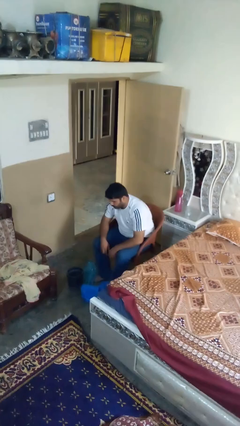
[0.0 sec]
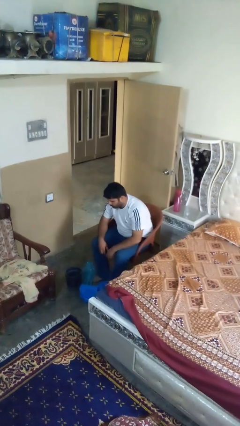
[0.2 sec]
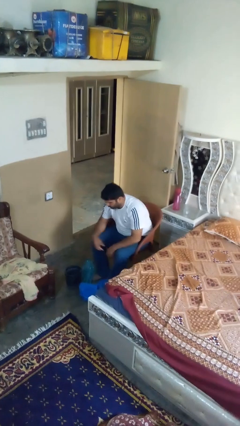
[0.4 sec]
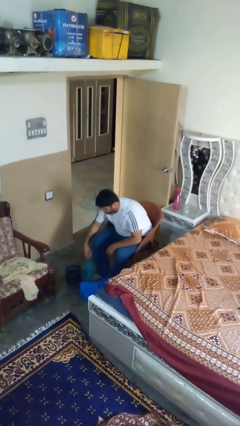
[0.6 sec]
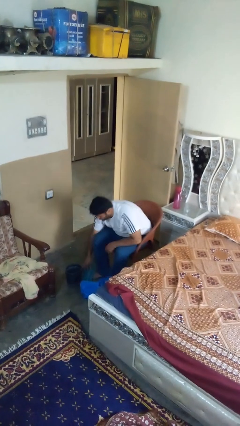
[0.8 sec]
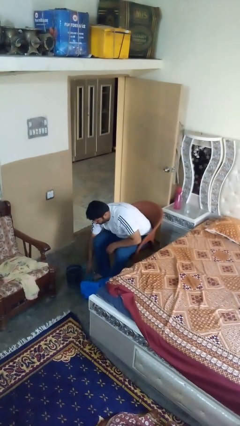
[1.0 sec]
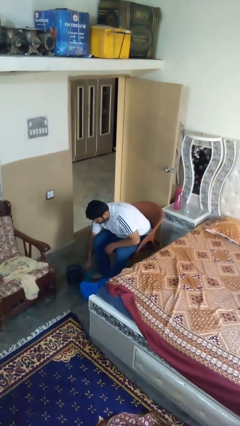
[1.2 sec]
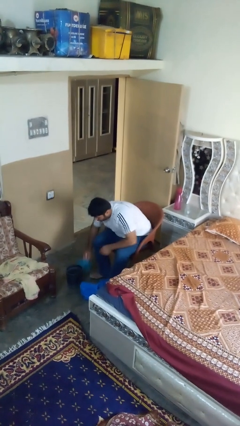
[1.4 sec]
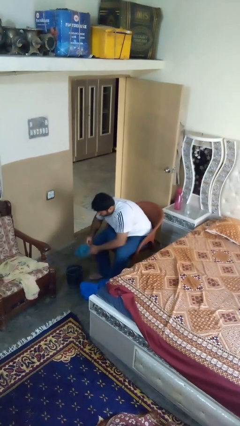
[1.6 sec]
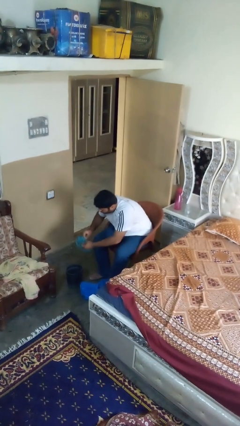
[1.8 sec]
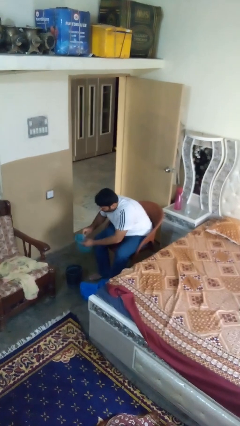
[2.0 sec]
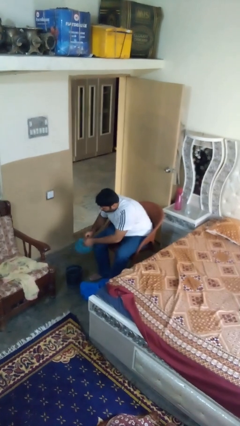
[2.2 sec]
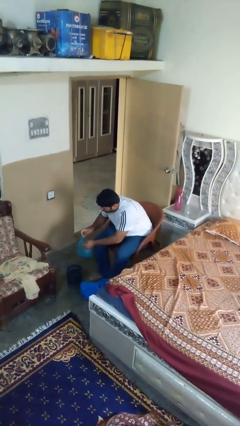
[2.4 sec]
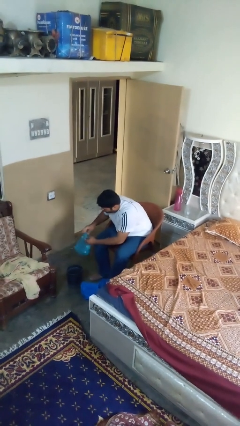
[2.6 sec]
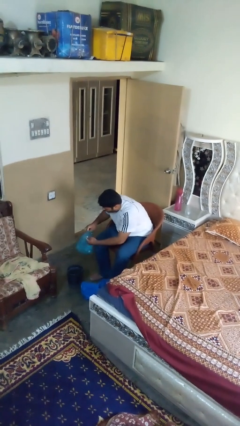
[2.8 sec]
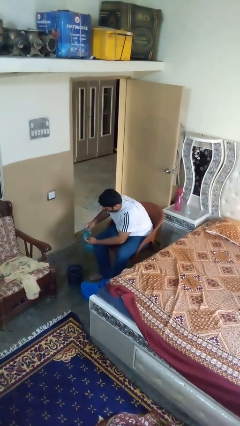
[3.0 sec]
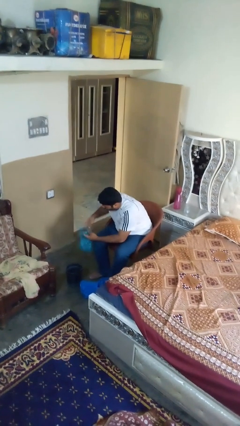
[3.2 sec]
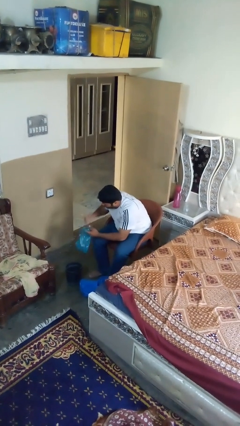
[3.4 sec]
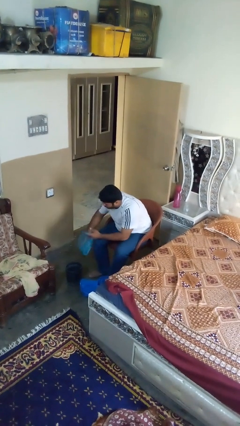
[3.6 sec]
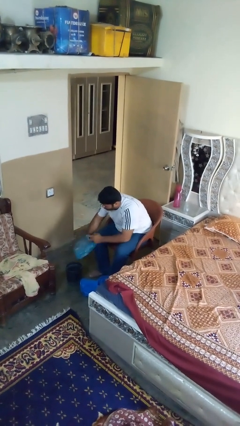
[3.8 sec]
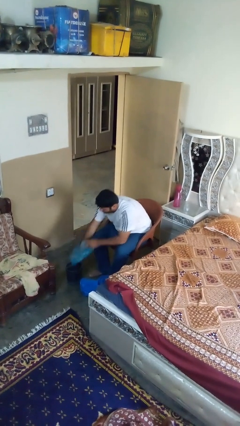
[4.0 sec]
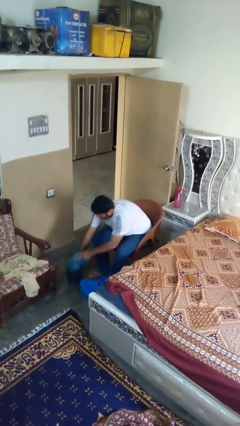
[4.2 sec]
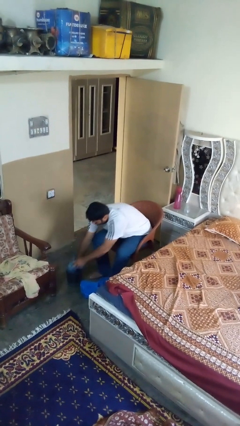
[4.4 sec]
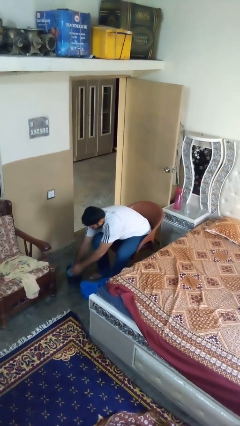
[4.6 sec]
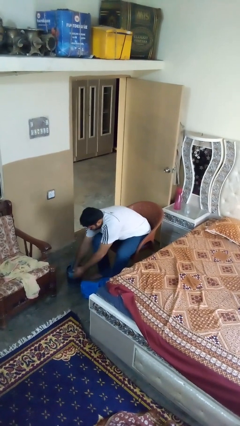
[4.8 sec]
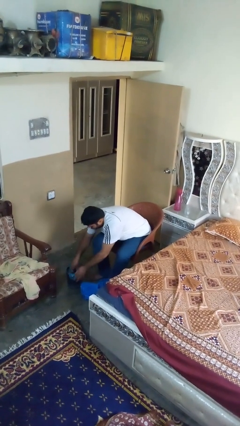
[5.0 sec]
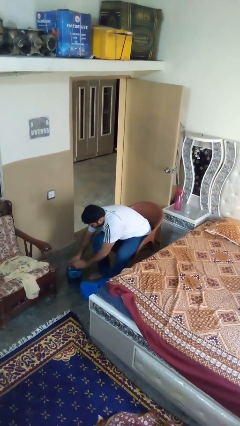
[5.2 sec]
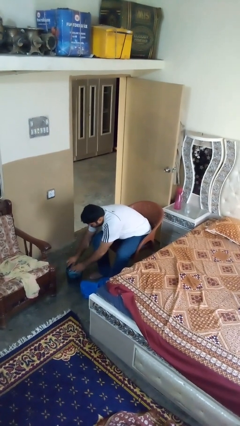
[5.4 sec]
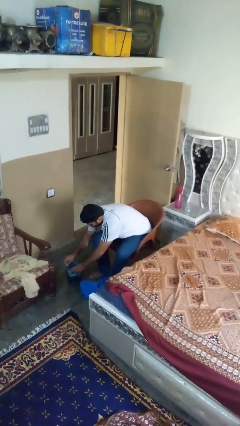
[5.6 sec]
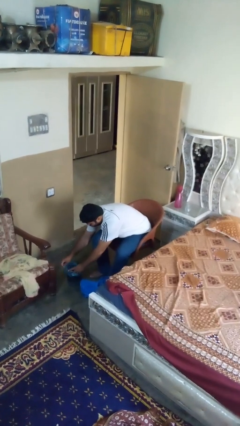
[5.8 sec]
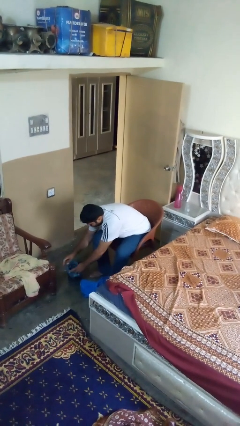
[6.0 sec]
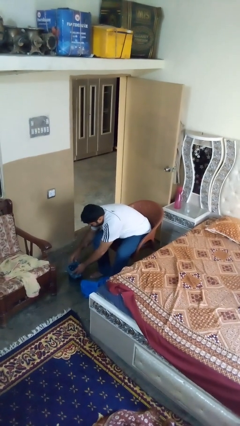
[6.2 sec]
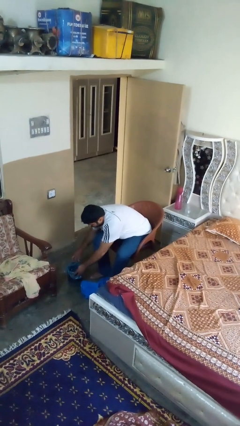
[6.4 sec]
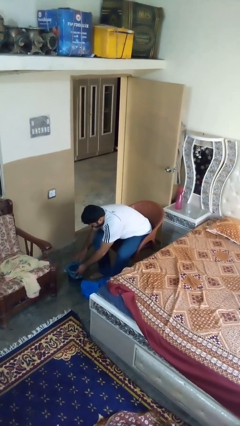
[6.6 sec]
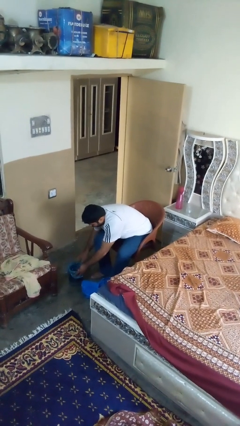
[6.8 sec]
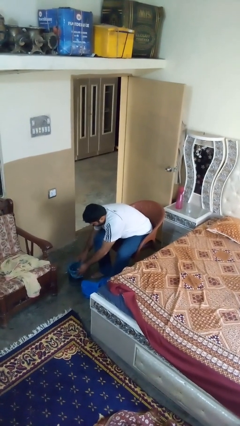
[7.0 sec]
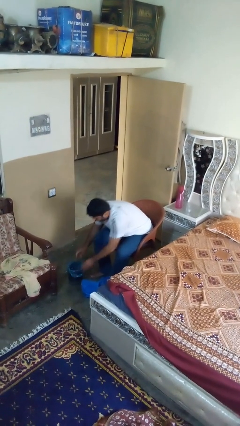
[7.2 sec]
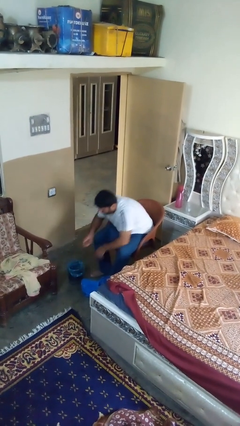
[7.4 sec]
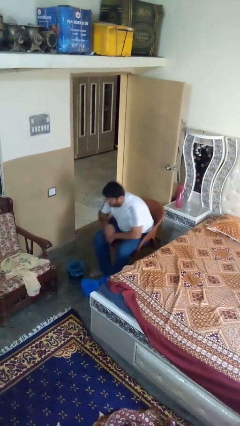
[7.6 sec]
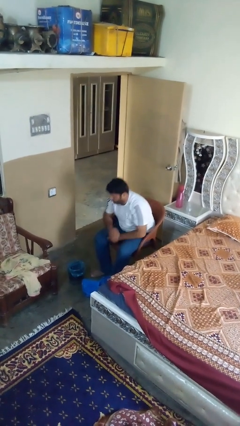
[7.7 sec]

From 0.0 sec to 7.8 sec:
person inserts trashbag into trashcan

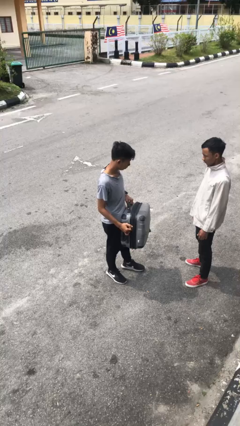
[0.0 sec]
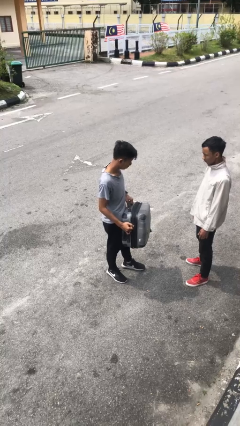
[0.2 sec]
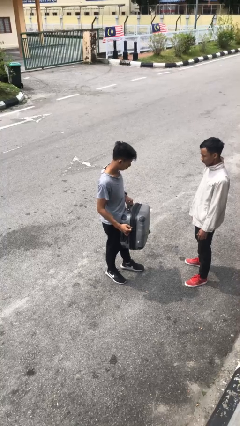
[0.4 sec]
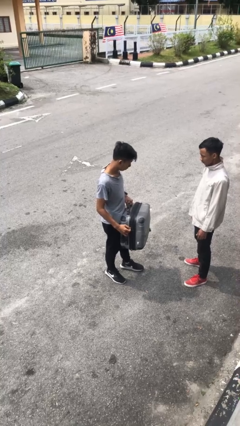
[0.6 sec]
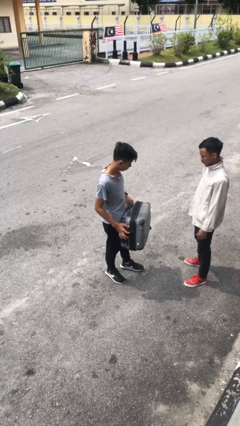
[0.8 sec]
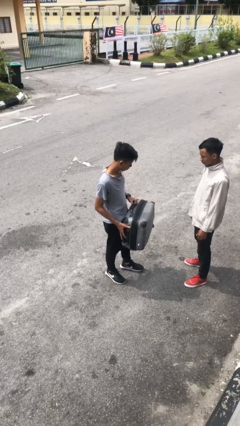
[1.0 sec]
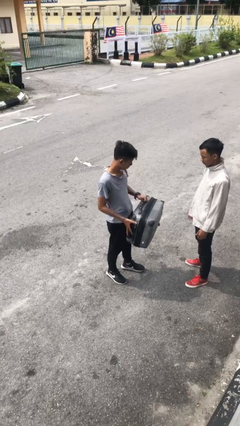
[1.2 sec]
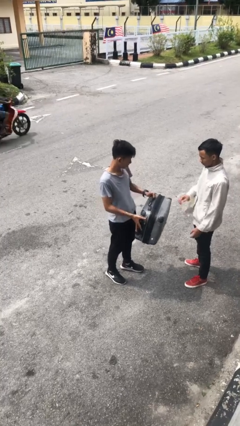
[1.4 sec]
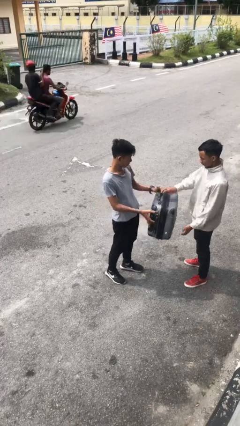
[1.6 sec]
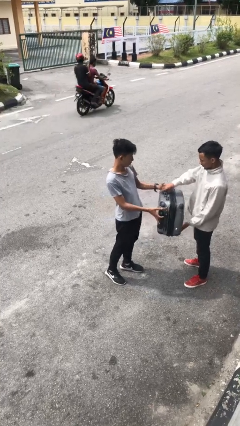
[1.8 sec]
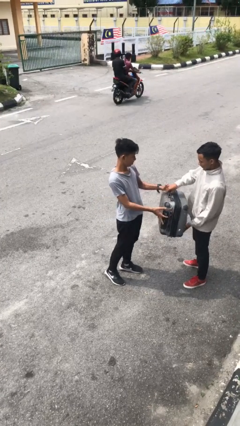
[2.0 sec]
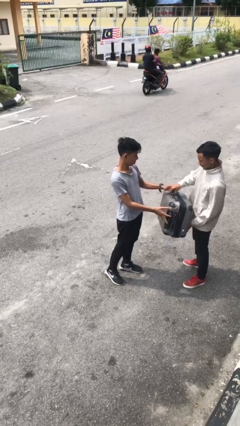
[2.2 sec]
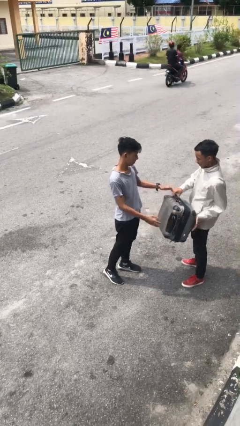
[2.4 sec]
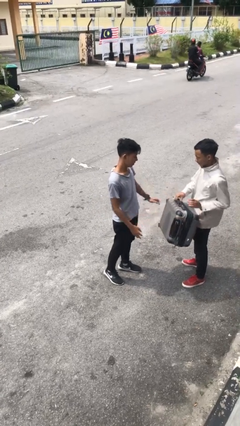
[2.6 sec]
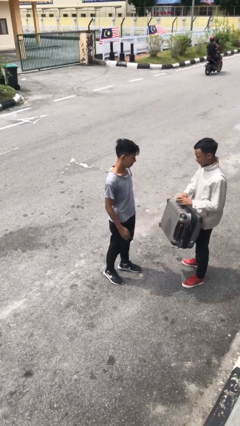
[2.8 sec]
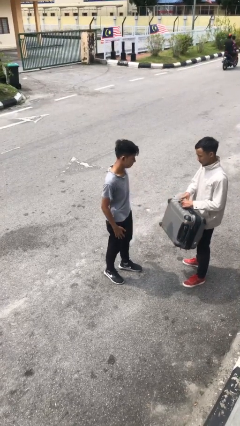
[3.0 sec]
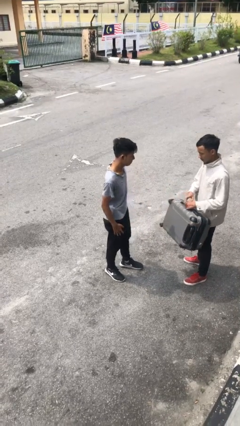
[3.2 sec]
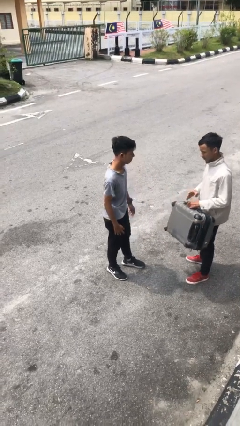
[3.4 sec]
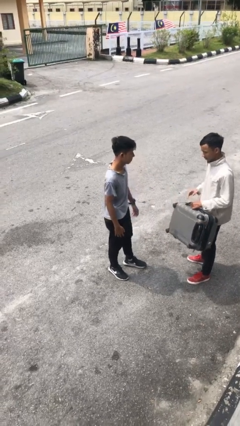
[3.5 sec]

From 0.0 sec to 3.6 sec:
person transfers object to person

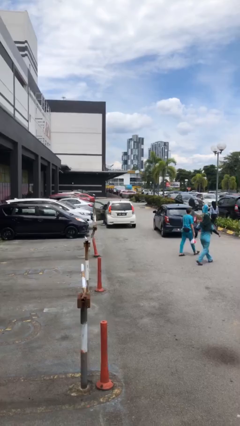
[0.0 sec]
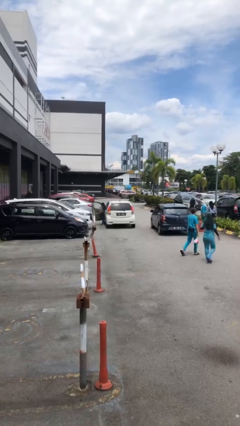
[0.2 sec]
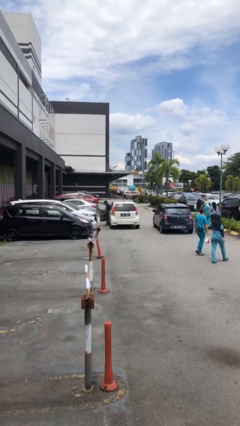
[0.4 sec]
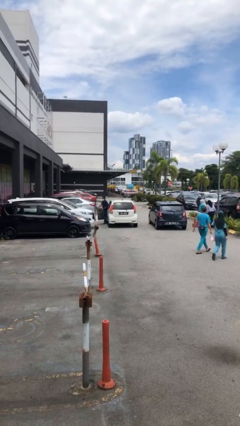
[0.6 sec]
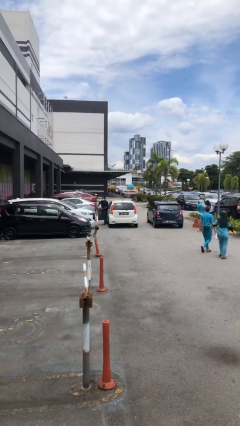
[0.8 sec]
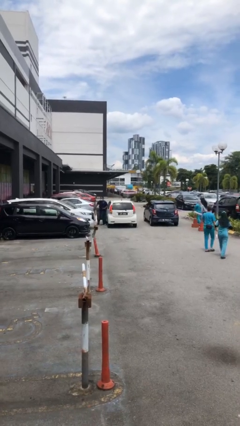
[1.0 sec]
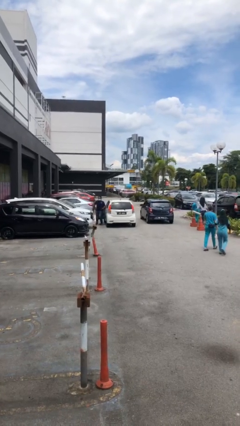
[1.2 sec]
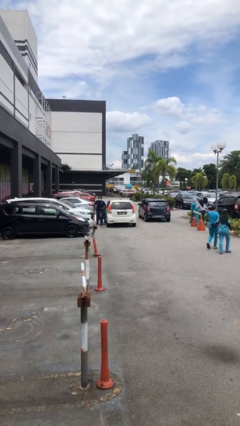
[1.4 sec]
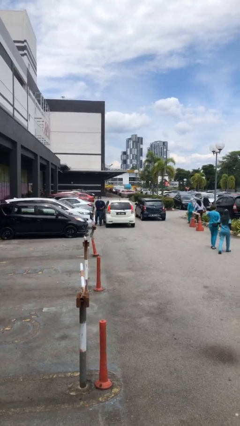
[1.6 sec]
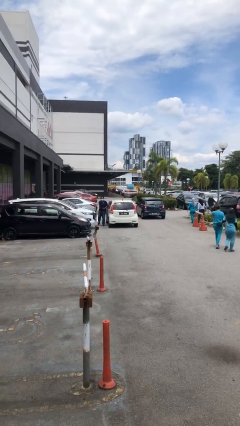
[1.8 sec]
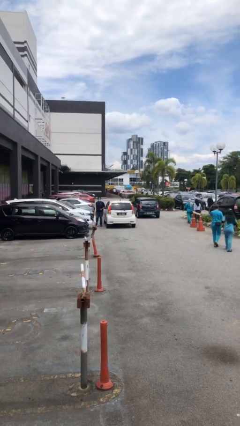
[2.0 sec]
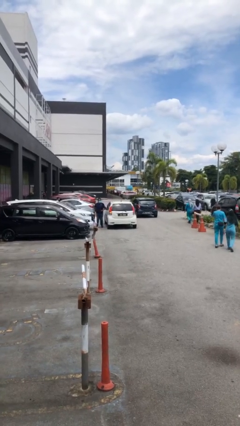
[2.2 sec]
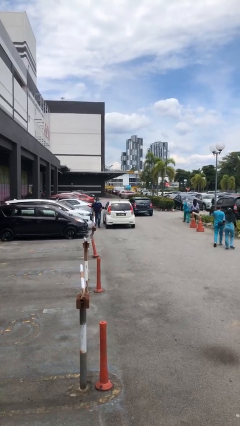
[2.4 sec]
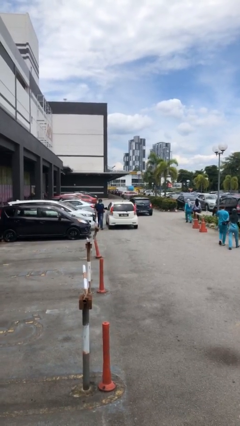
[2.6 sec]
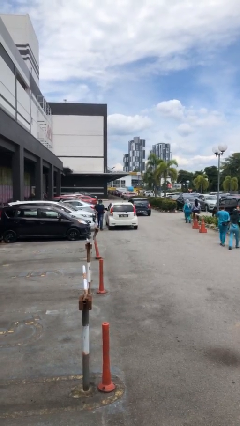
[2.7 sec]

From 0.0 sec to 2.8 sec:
car drops off person

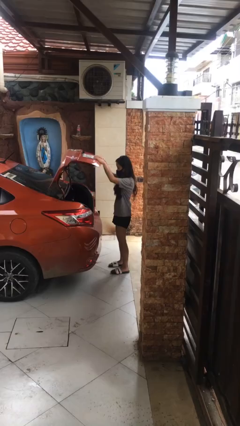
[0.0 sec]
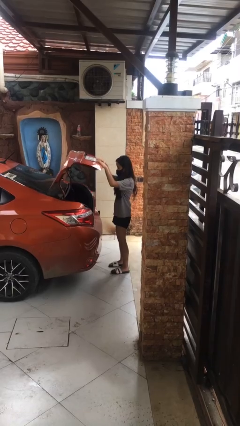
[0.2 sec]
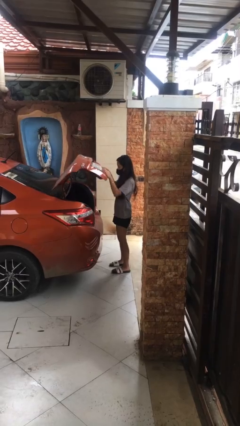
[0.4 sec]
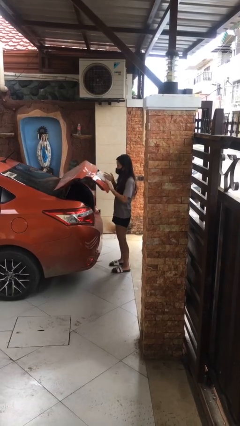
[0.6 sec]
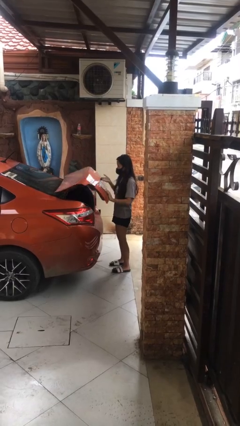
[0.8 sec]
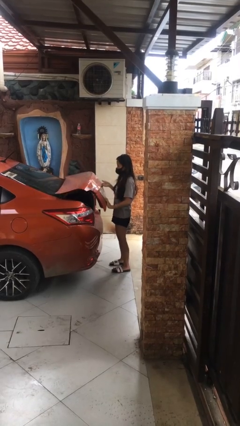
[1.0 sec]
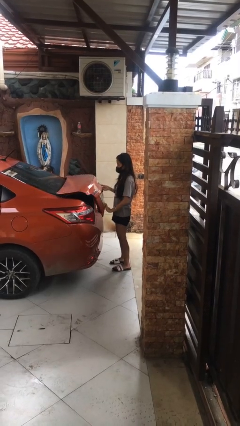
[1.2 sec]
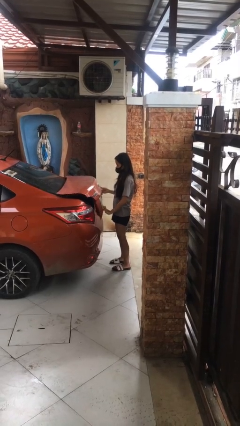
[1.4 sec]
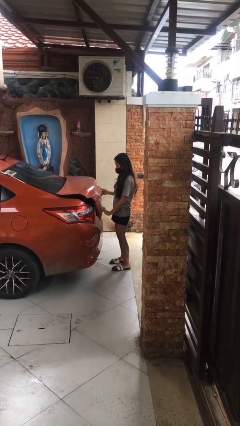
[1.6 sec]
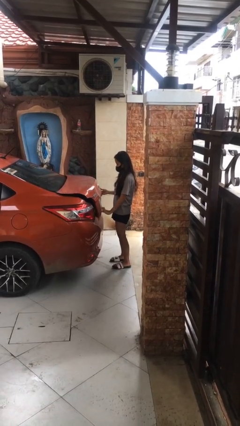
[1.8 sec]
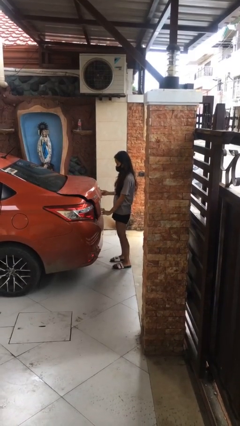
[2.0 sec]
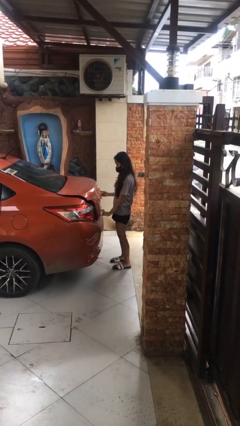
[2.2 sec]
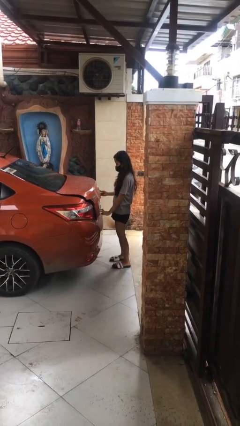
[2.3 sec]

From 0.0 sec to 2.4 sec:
person closes car trunk

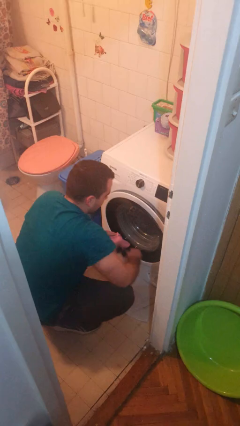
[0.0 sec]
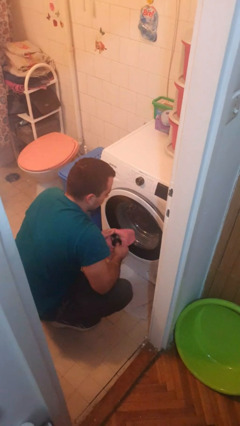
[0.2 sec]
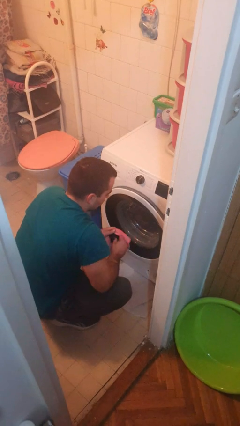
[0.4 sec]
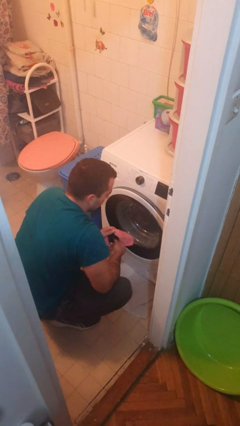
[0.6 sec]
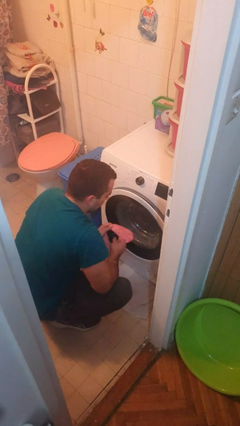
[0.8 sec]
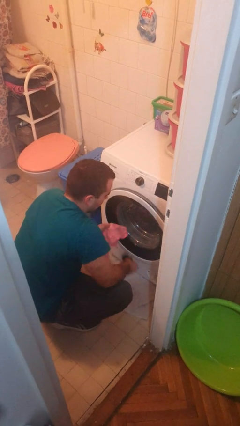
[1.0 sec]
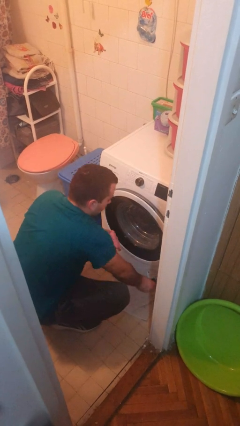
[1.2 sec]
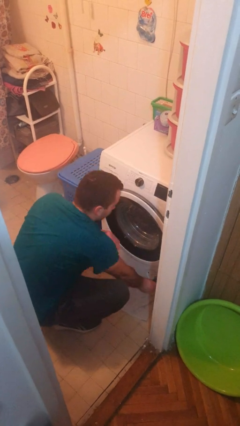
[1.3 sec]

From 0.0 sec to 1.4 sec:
person cleans dryer lint trap
